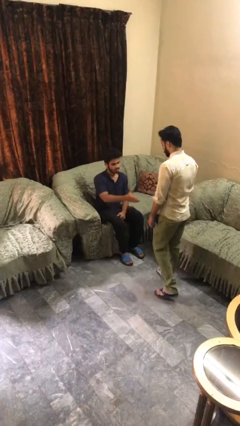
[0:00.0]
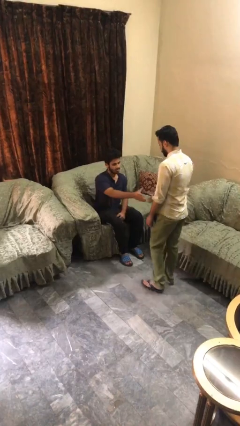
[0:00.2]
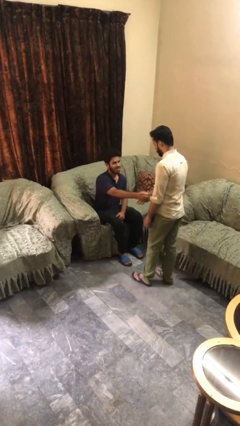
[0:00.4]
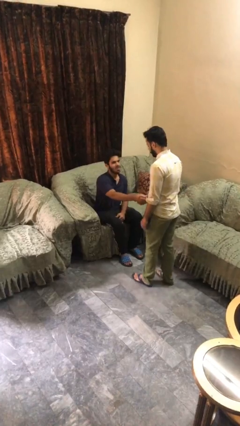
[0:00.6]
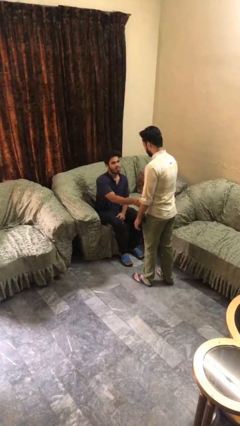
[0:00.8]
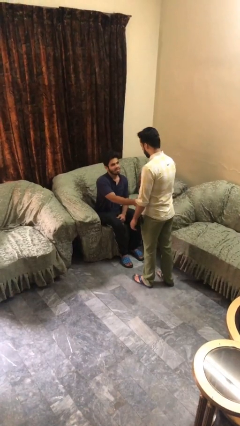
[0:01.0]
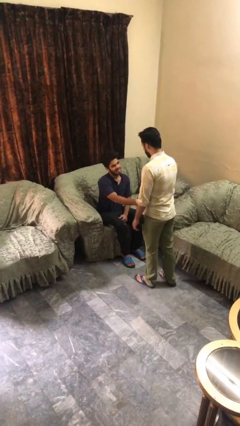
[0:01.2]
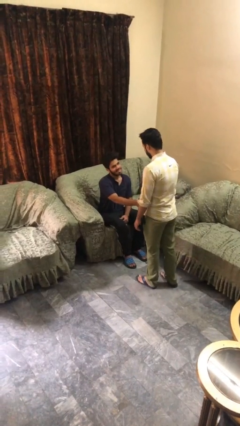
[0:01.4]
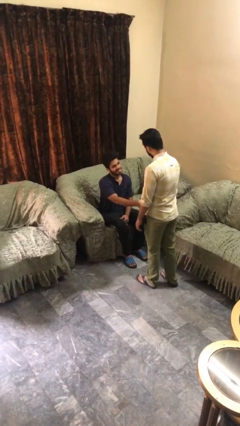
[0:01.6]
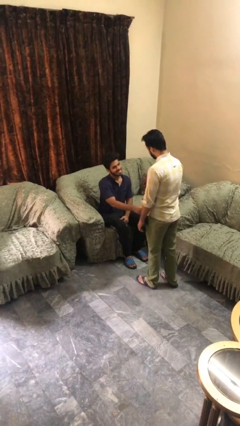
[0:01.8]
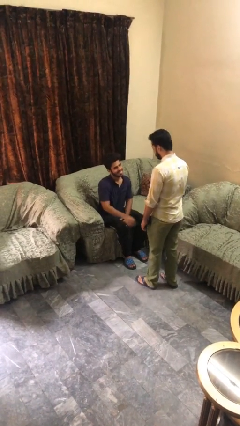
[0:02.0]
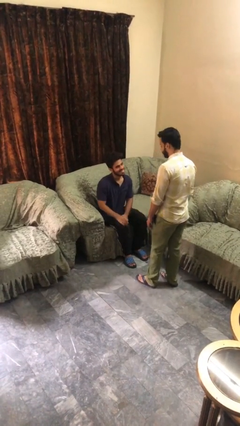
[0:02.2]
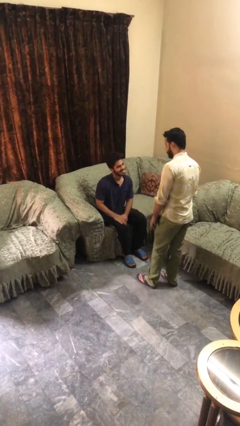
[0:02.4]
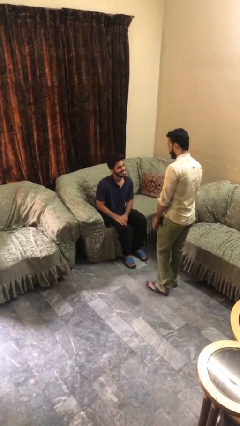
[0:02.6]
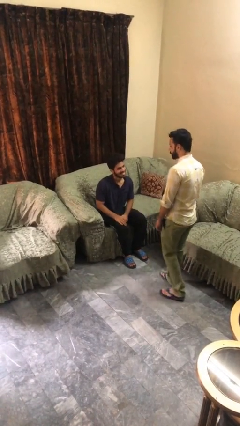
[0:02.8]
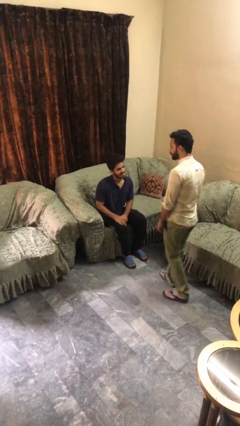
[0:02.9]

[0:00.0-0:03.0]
person shakes hand

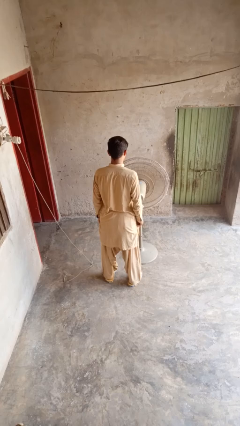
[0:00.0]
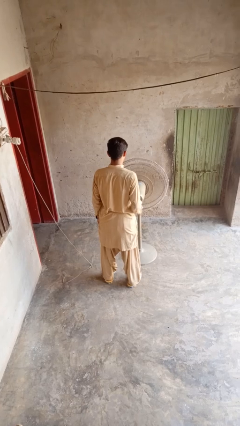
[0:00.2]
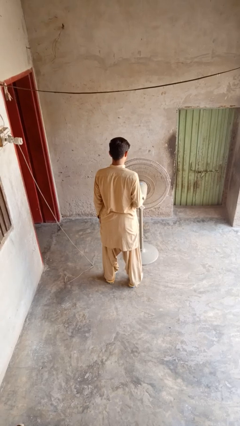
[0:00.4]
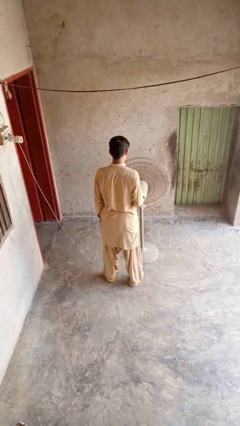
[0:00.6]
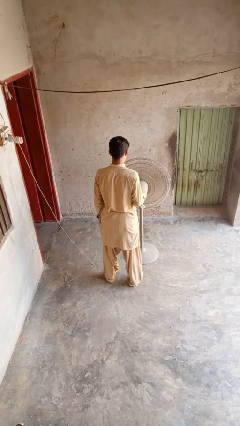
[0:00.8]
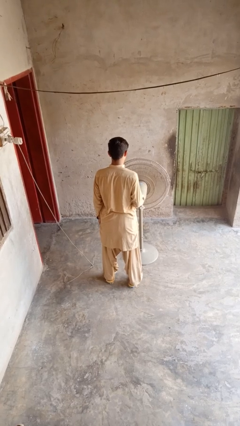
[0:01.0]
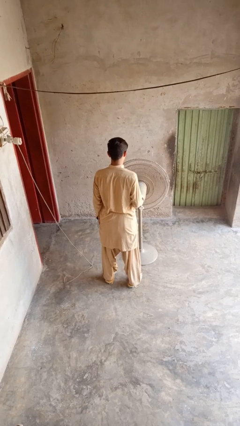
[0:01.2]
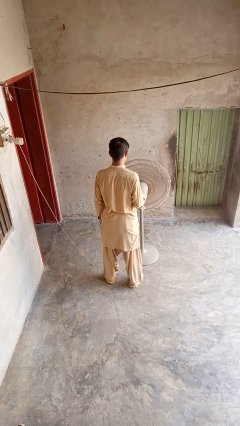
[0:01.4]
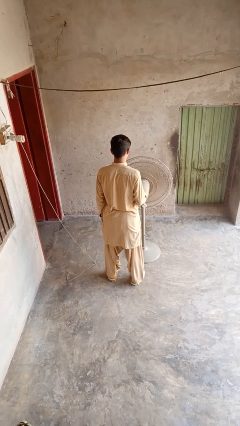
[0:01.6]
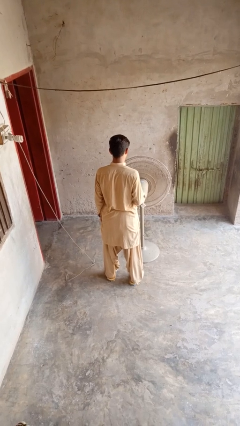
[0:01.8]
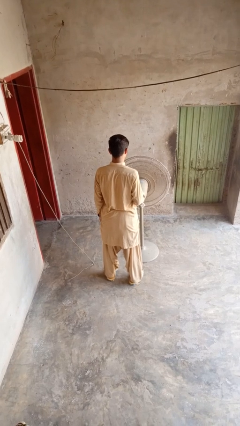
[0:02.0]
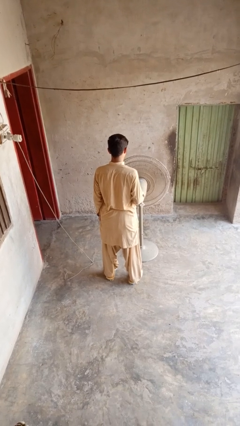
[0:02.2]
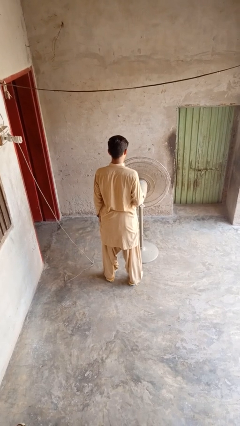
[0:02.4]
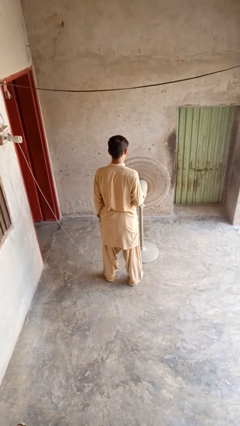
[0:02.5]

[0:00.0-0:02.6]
person turns on fan

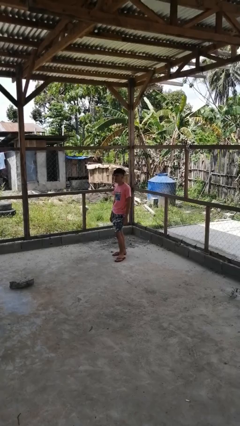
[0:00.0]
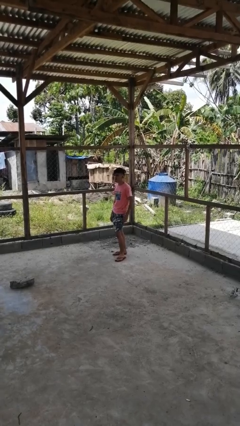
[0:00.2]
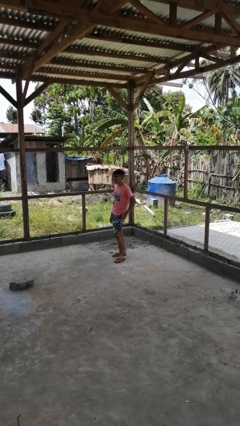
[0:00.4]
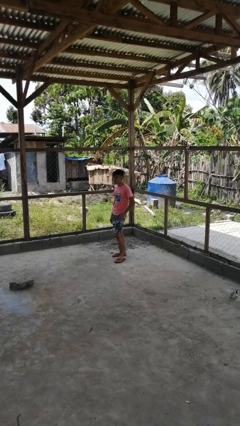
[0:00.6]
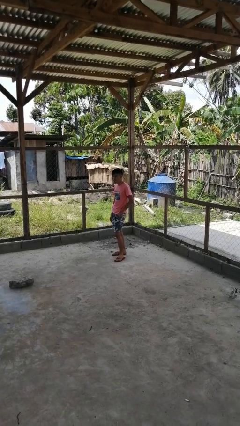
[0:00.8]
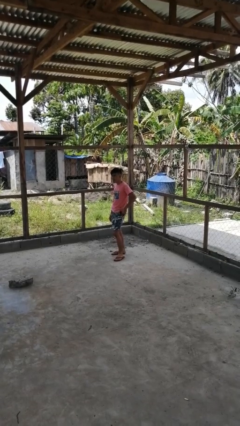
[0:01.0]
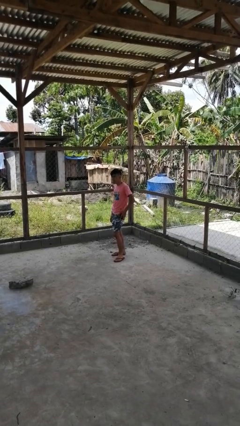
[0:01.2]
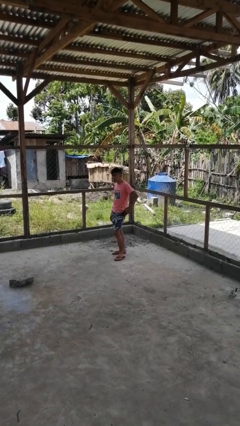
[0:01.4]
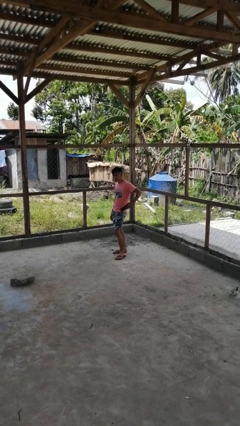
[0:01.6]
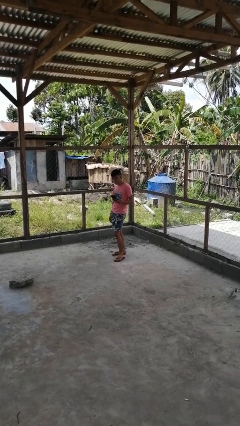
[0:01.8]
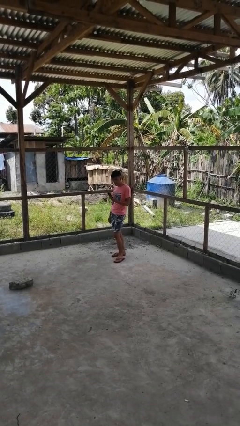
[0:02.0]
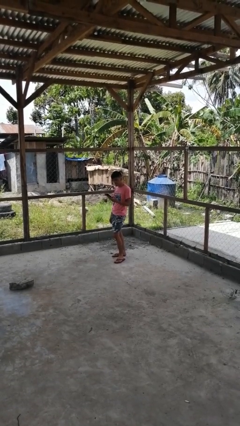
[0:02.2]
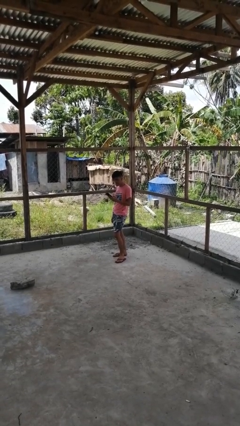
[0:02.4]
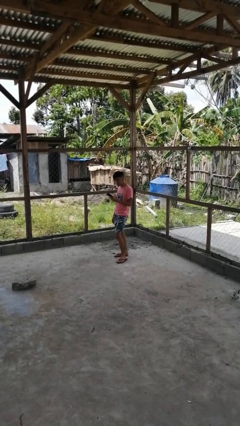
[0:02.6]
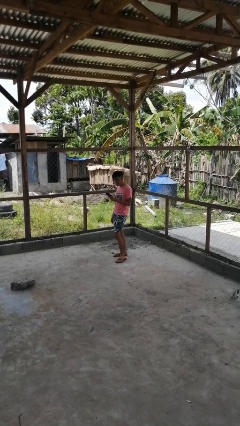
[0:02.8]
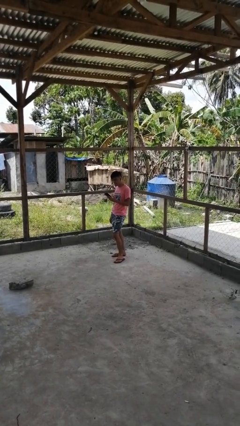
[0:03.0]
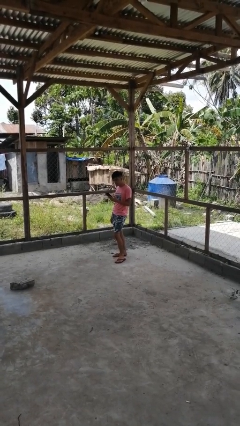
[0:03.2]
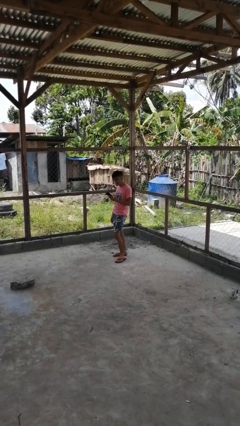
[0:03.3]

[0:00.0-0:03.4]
person takes phone from pocket

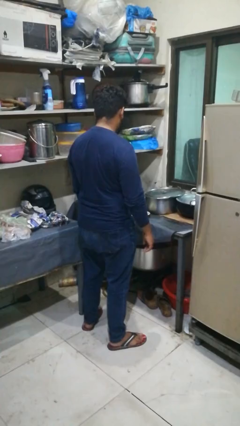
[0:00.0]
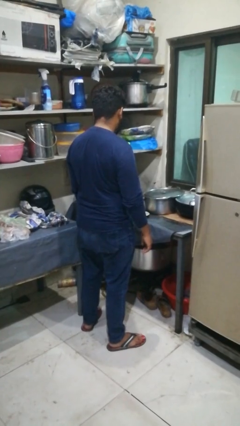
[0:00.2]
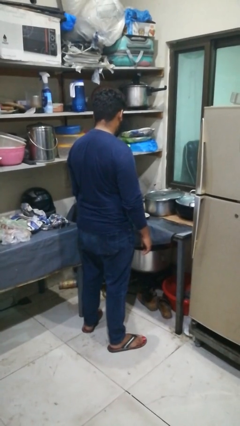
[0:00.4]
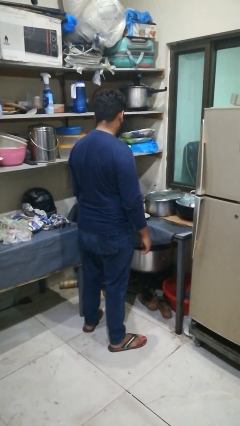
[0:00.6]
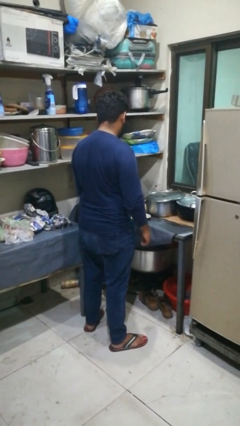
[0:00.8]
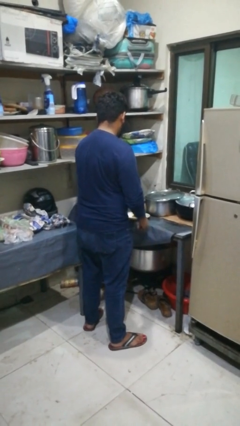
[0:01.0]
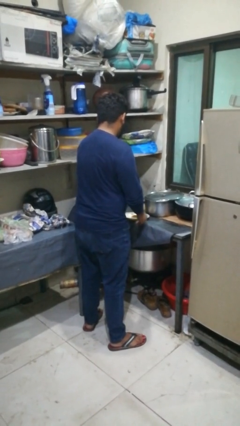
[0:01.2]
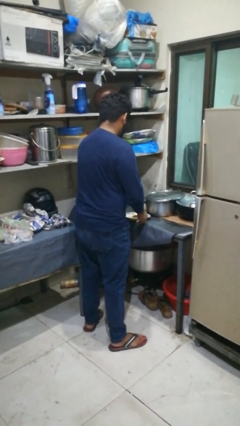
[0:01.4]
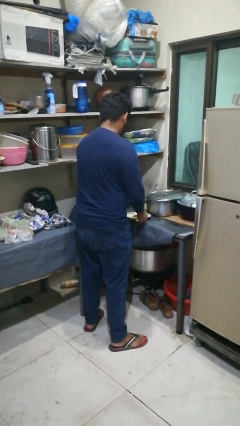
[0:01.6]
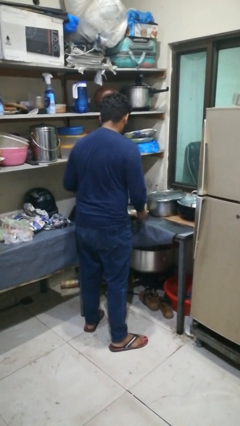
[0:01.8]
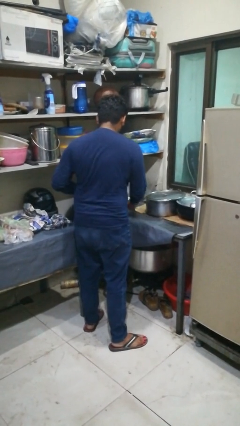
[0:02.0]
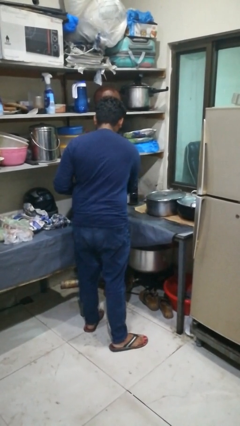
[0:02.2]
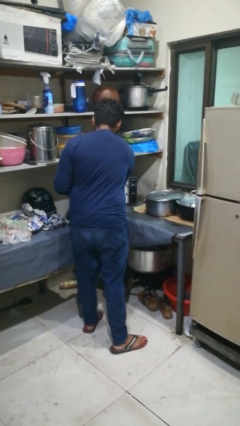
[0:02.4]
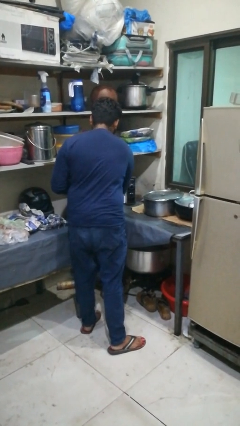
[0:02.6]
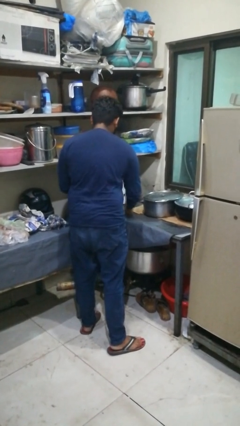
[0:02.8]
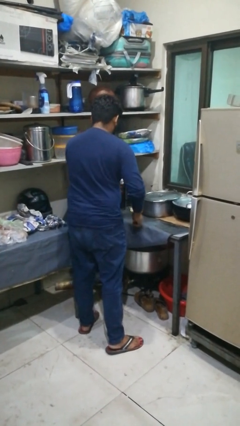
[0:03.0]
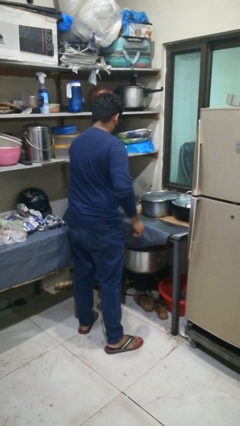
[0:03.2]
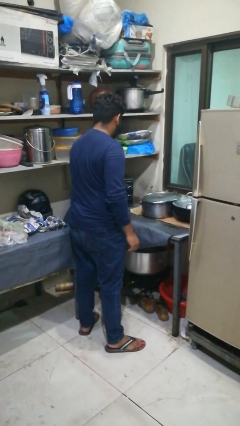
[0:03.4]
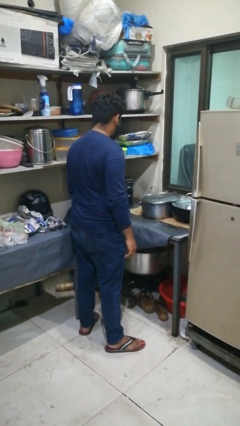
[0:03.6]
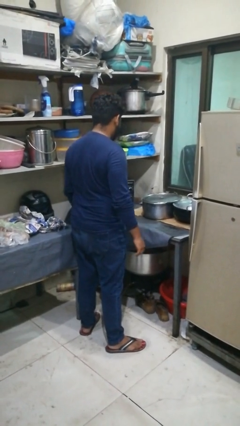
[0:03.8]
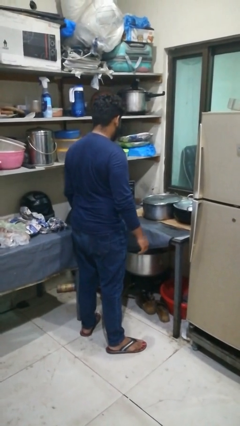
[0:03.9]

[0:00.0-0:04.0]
person puts object into oven

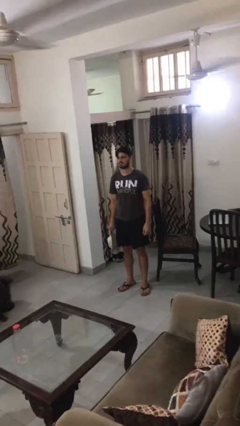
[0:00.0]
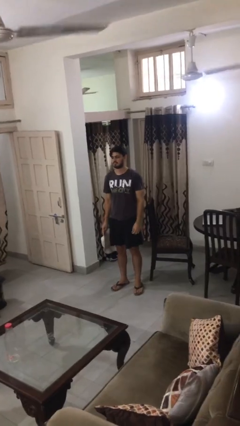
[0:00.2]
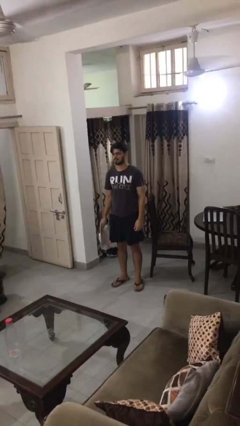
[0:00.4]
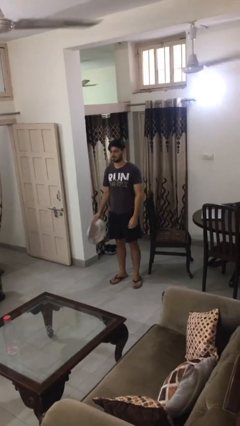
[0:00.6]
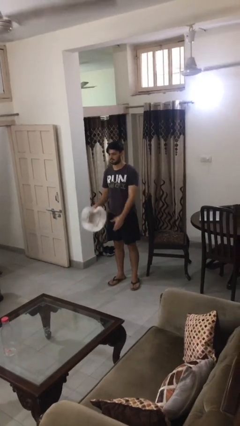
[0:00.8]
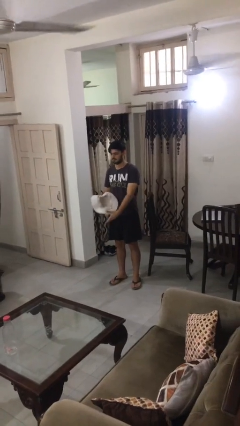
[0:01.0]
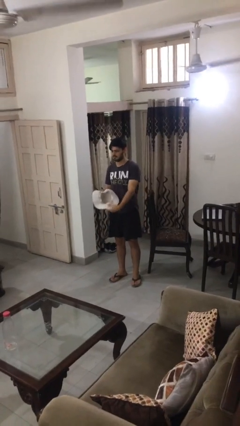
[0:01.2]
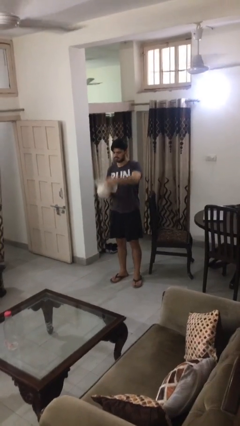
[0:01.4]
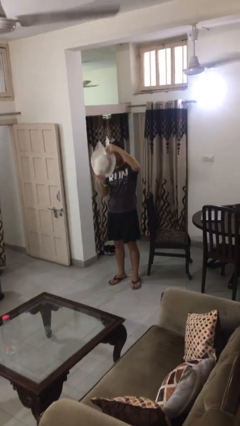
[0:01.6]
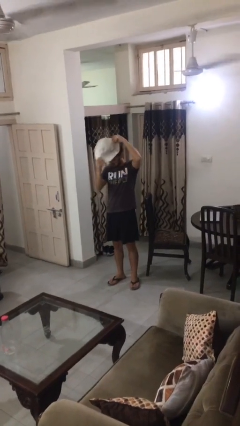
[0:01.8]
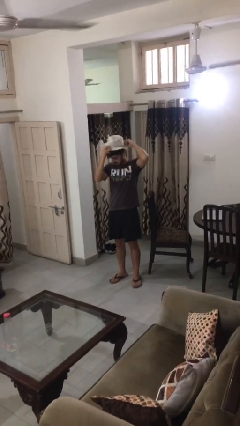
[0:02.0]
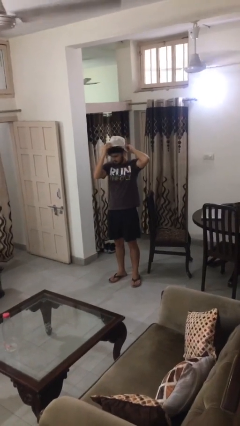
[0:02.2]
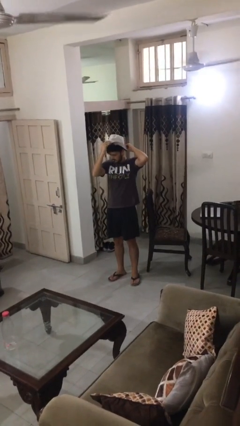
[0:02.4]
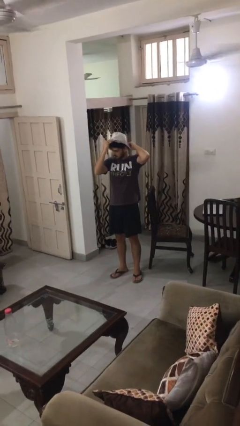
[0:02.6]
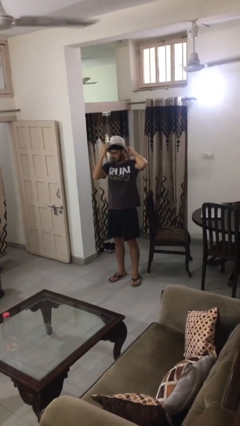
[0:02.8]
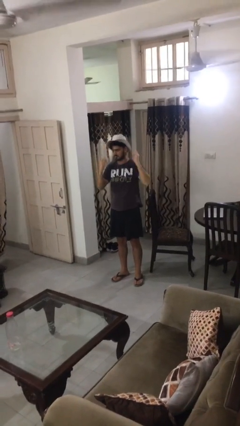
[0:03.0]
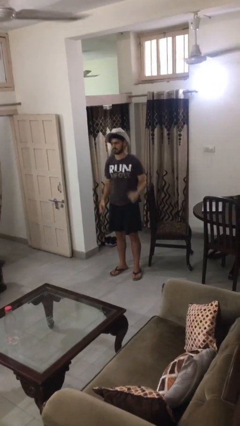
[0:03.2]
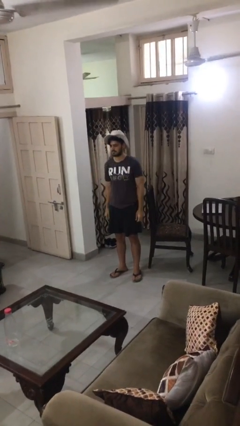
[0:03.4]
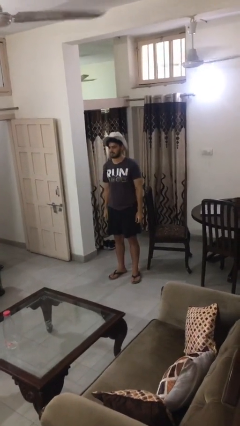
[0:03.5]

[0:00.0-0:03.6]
person puts on hat

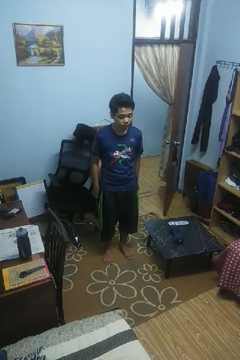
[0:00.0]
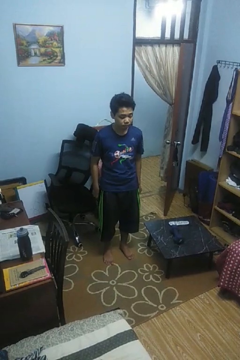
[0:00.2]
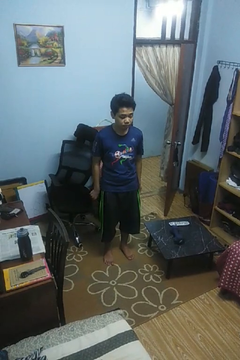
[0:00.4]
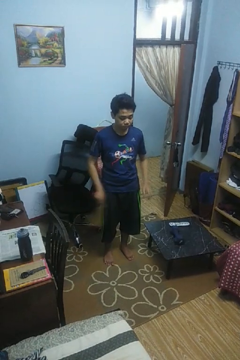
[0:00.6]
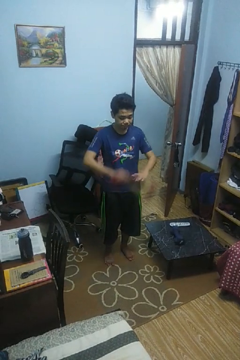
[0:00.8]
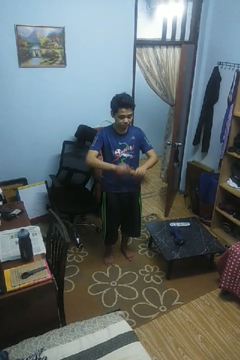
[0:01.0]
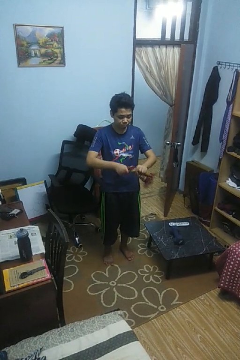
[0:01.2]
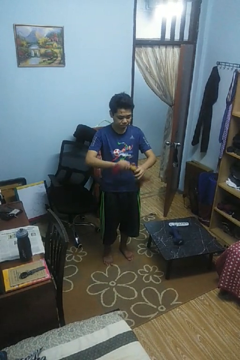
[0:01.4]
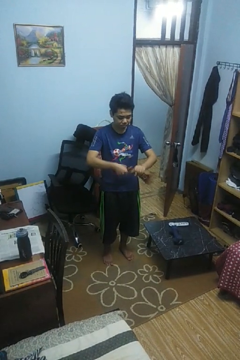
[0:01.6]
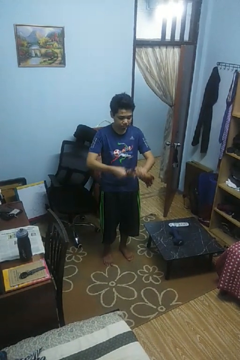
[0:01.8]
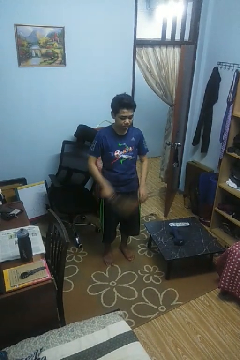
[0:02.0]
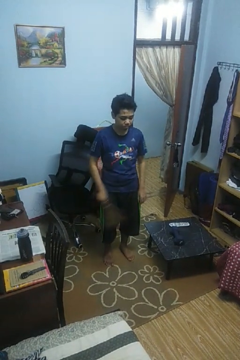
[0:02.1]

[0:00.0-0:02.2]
person squeezes object
